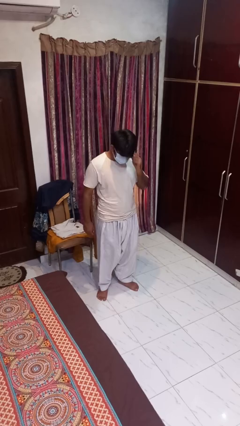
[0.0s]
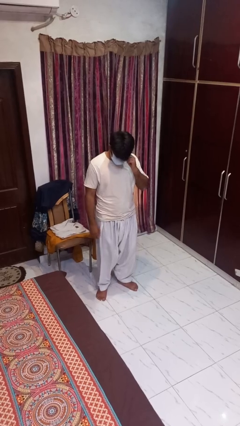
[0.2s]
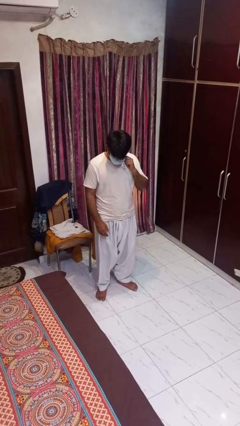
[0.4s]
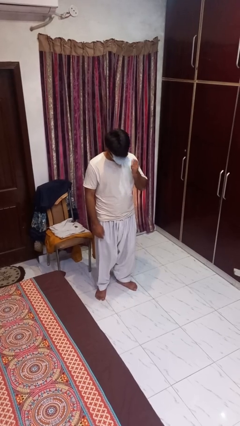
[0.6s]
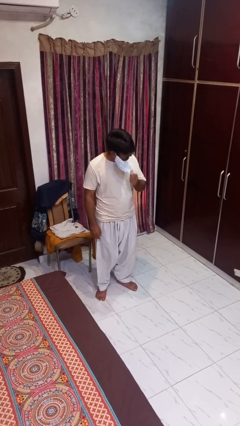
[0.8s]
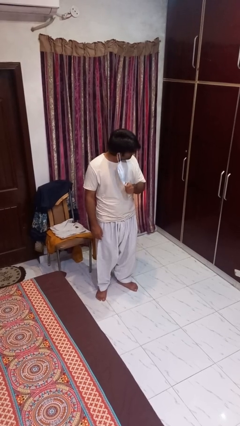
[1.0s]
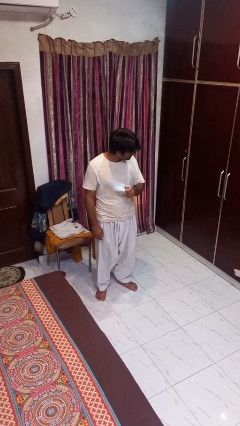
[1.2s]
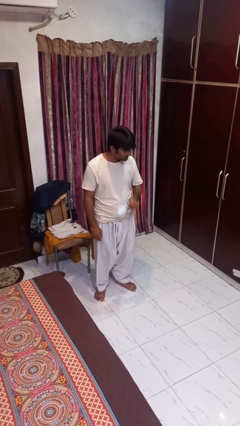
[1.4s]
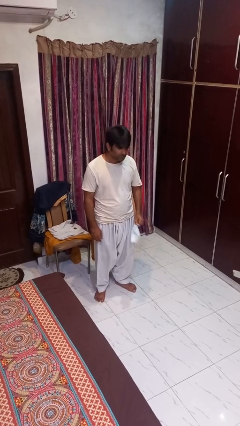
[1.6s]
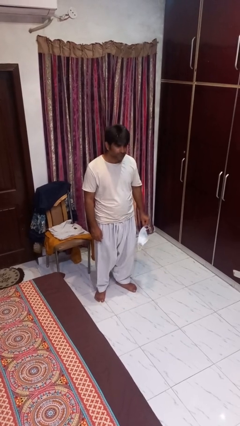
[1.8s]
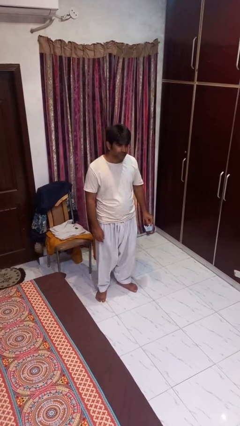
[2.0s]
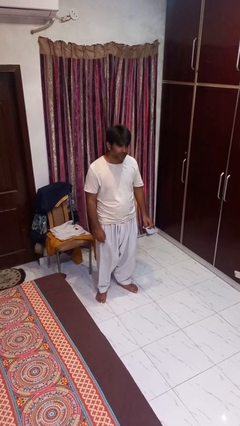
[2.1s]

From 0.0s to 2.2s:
person takes off facemask

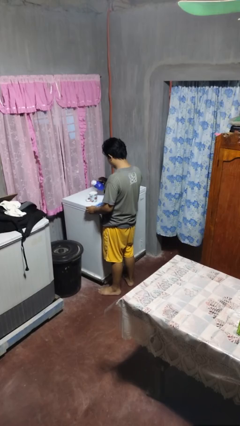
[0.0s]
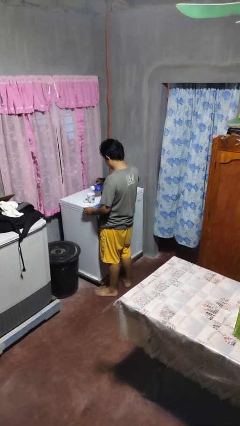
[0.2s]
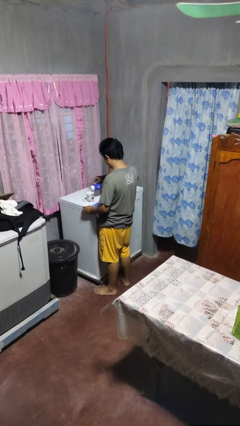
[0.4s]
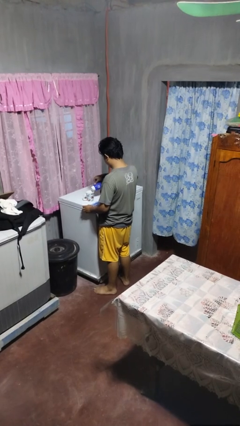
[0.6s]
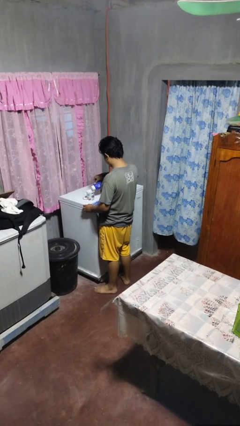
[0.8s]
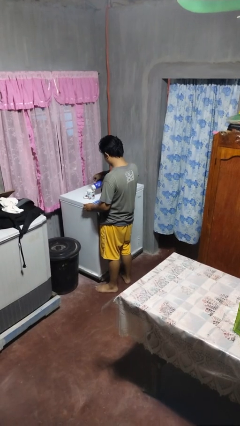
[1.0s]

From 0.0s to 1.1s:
person pours coffee into mug

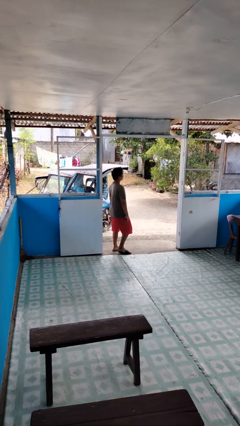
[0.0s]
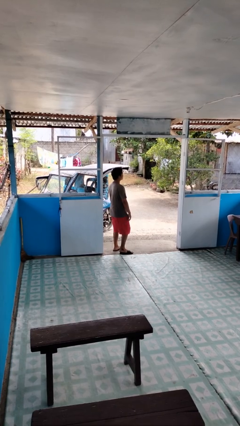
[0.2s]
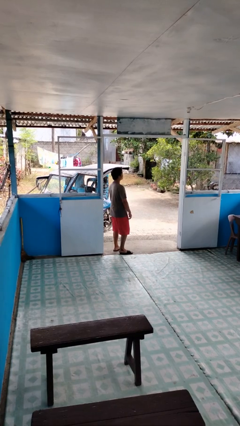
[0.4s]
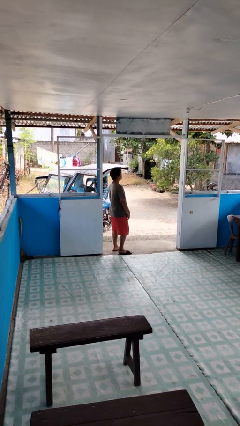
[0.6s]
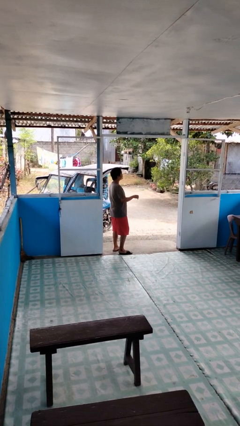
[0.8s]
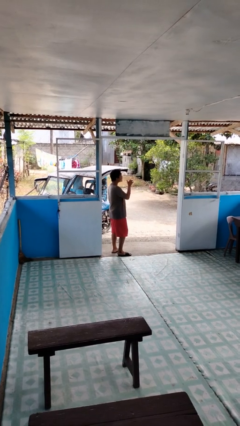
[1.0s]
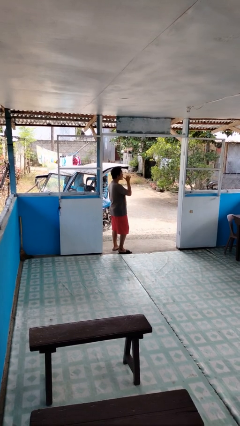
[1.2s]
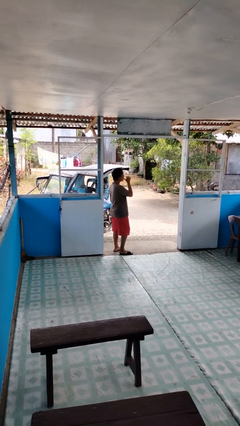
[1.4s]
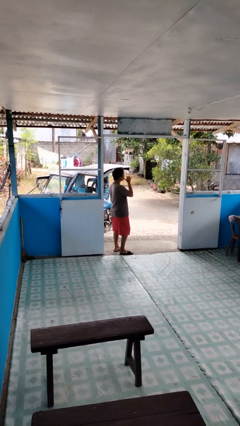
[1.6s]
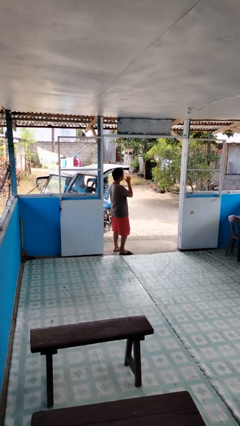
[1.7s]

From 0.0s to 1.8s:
person licks fingers

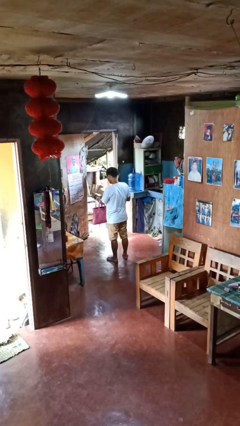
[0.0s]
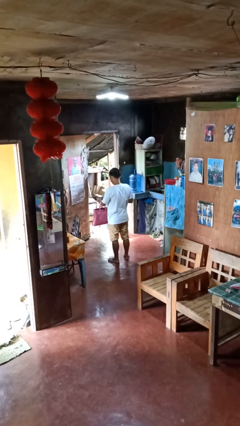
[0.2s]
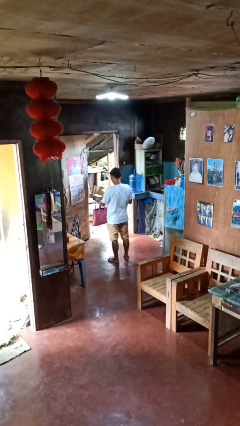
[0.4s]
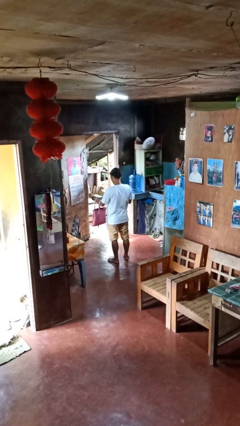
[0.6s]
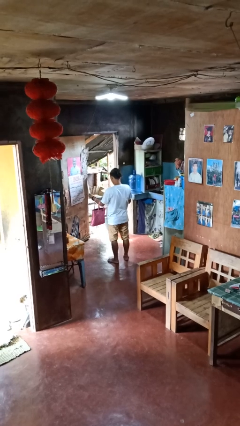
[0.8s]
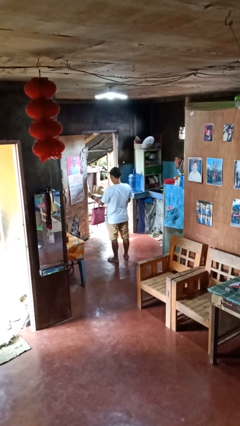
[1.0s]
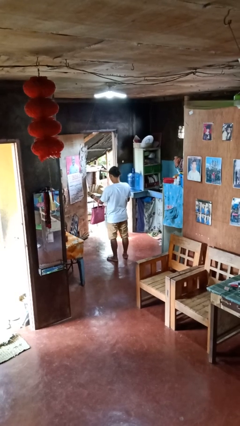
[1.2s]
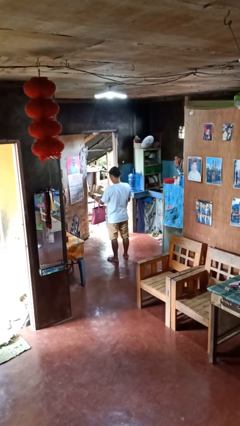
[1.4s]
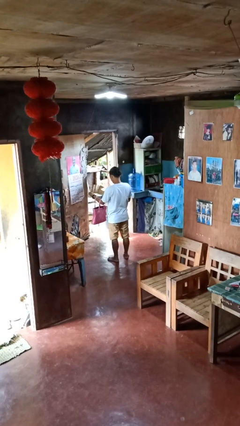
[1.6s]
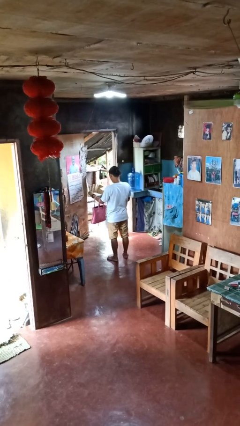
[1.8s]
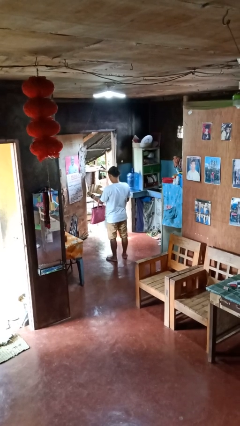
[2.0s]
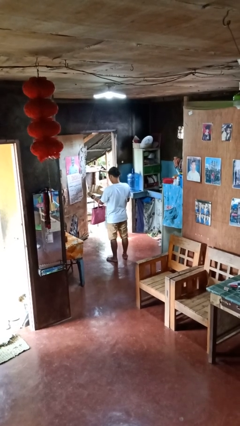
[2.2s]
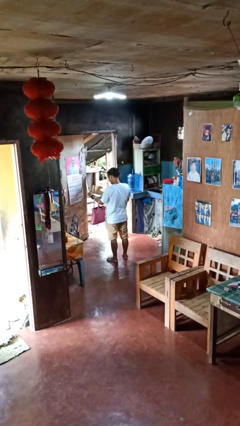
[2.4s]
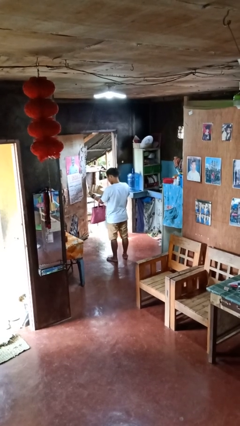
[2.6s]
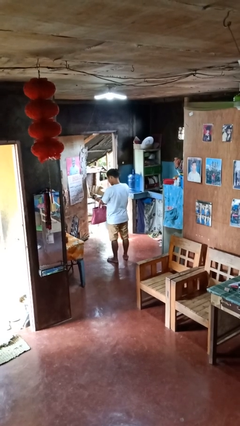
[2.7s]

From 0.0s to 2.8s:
person takes object from purse

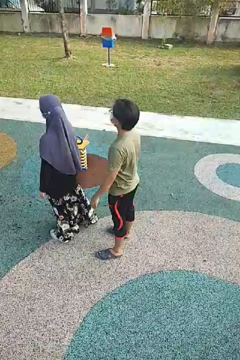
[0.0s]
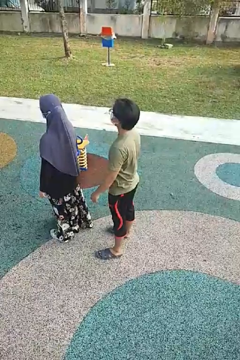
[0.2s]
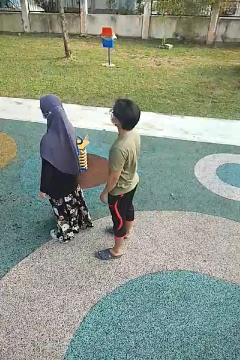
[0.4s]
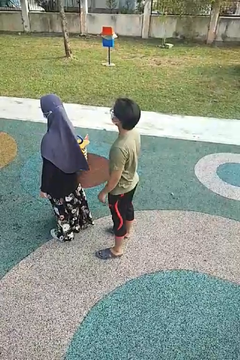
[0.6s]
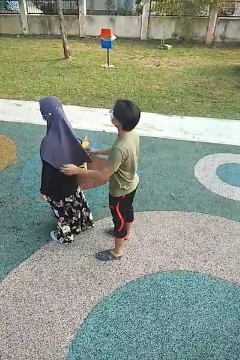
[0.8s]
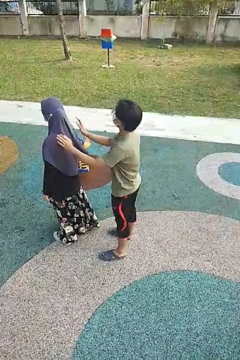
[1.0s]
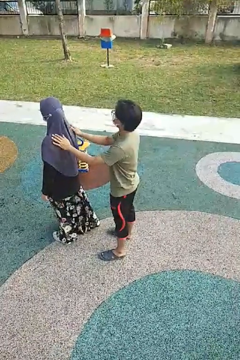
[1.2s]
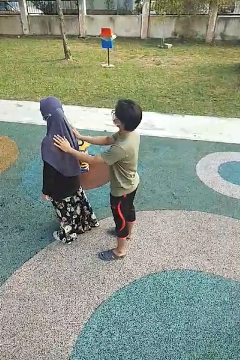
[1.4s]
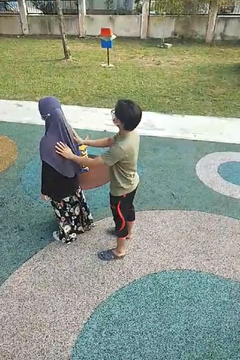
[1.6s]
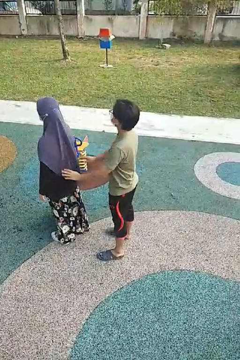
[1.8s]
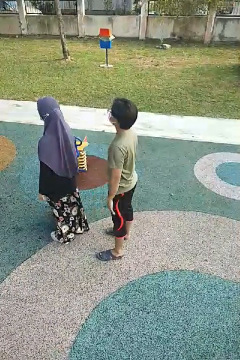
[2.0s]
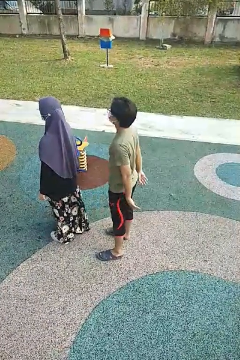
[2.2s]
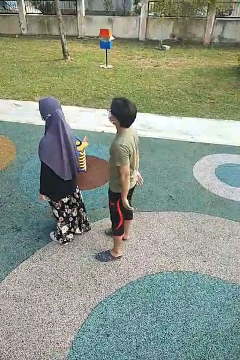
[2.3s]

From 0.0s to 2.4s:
person touches back of person

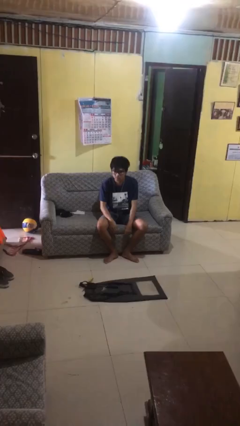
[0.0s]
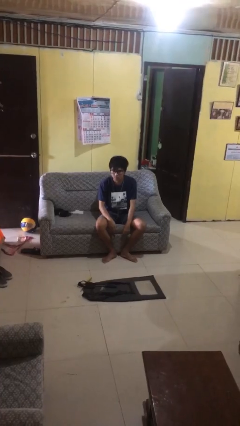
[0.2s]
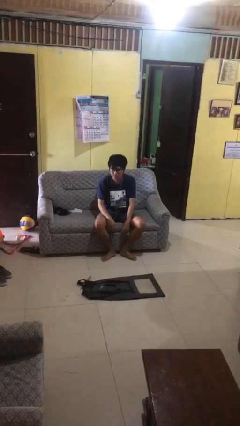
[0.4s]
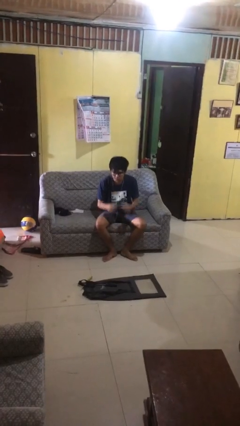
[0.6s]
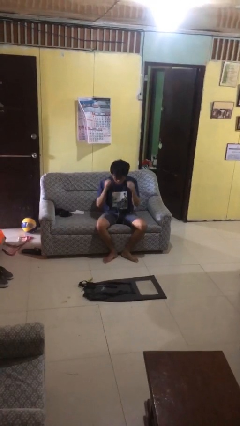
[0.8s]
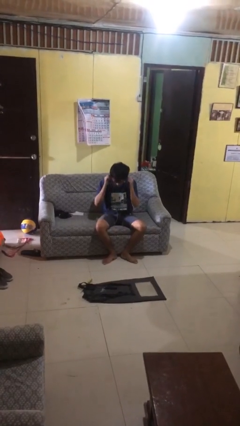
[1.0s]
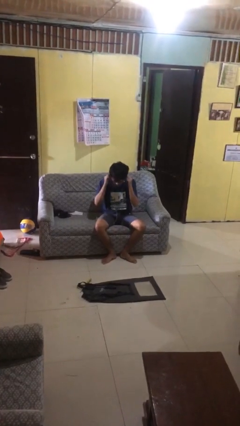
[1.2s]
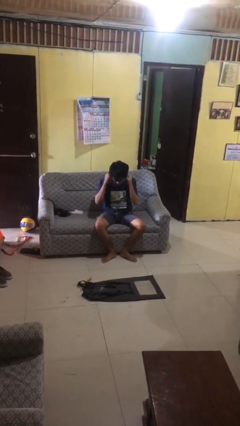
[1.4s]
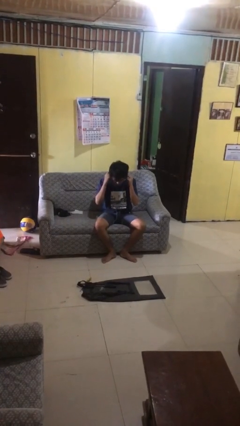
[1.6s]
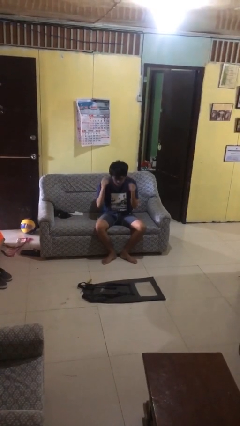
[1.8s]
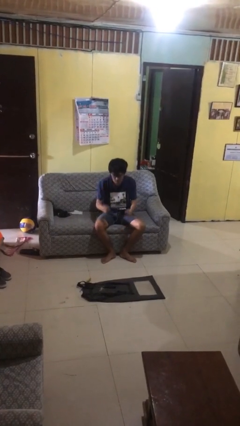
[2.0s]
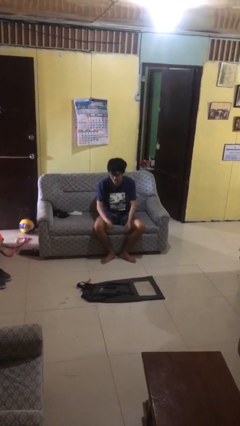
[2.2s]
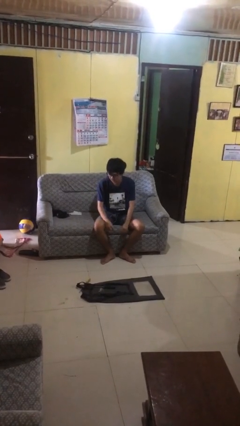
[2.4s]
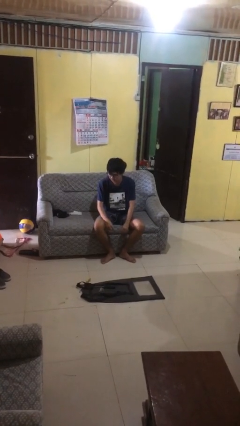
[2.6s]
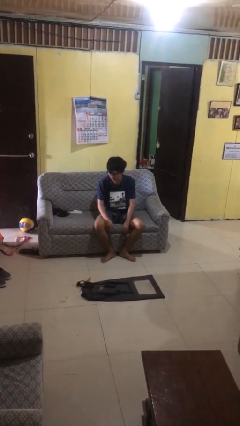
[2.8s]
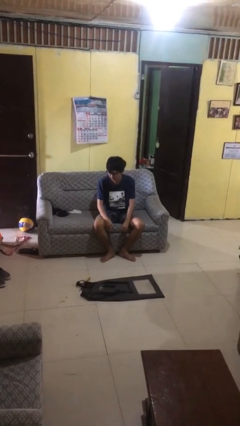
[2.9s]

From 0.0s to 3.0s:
person takes off headphones

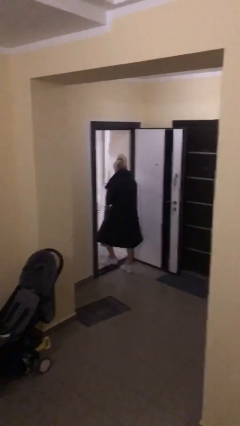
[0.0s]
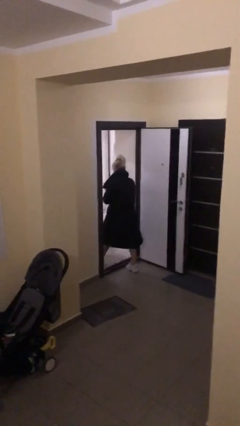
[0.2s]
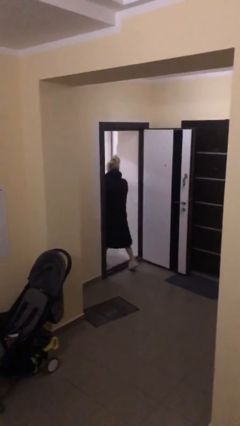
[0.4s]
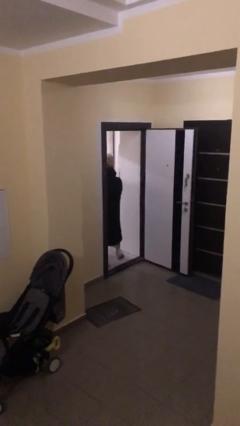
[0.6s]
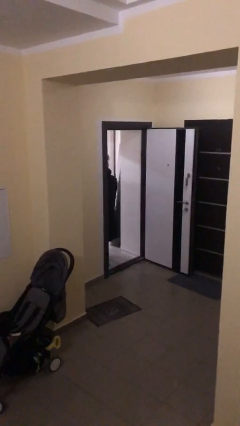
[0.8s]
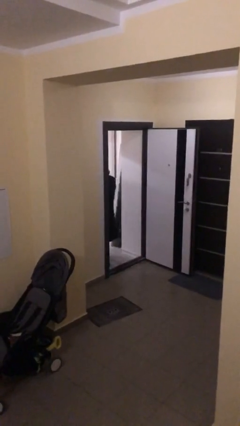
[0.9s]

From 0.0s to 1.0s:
person exits scene through structure

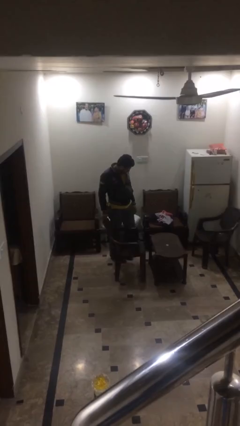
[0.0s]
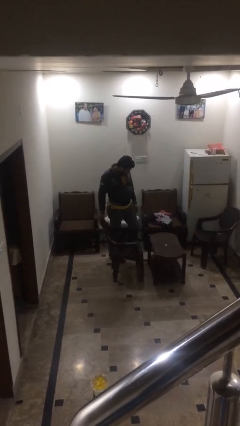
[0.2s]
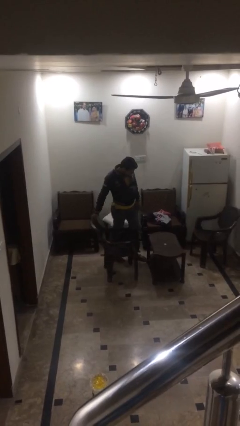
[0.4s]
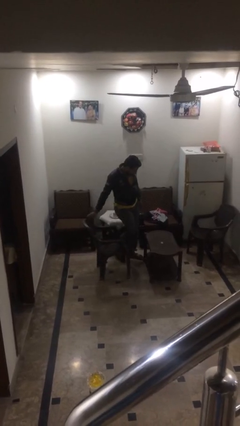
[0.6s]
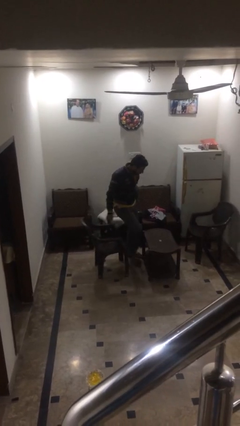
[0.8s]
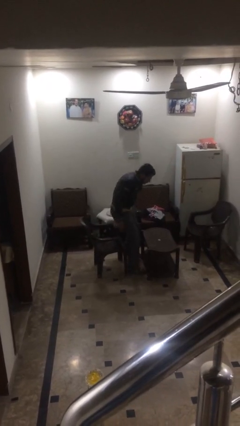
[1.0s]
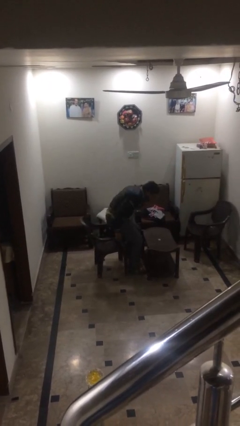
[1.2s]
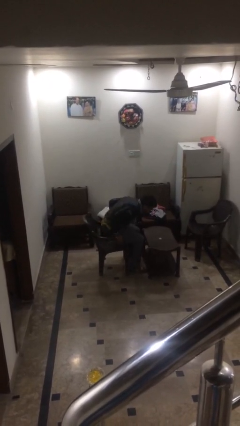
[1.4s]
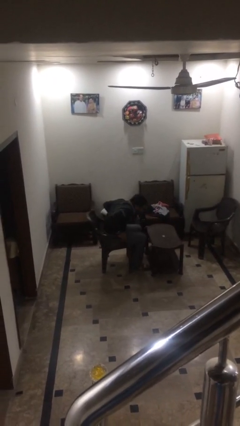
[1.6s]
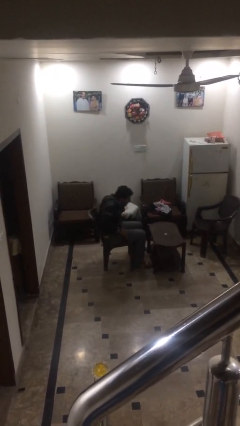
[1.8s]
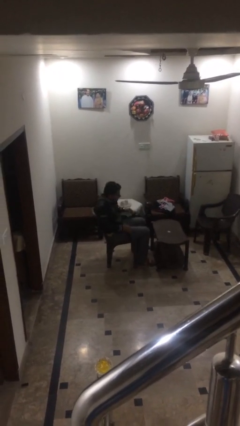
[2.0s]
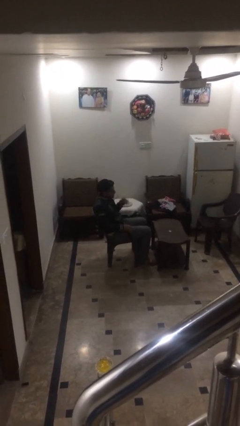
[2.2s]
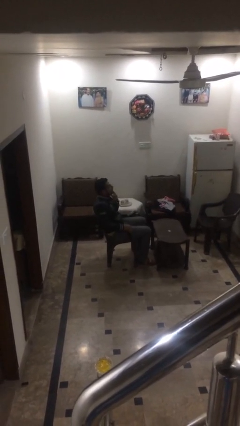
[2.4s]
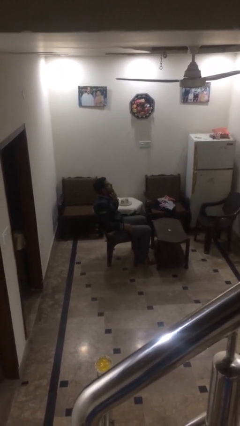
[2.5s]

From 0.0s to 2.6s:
person sits down

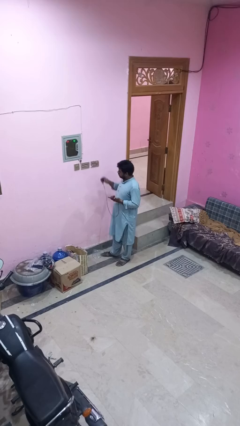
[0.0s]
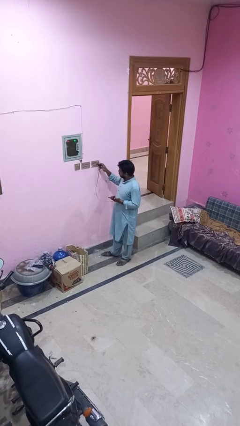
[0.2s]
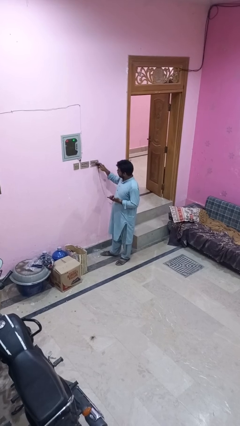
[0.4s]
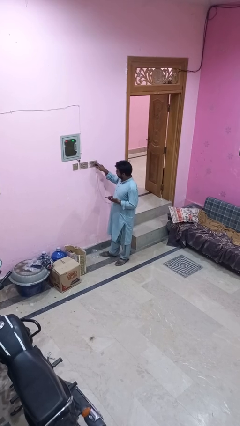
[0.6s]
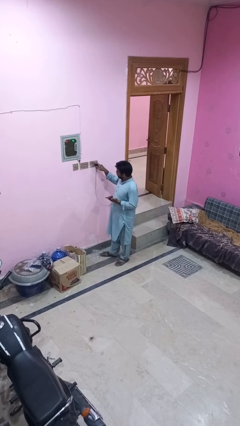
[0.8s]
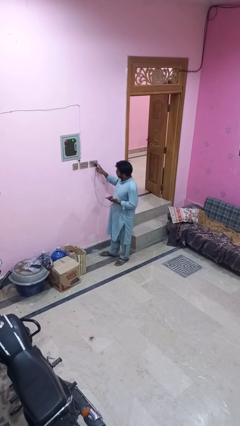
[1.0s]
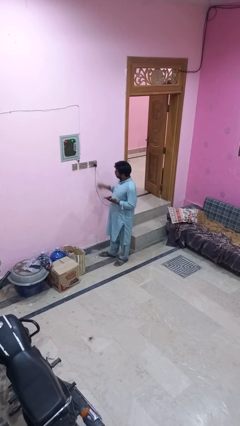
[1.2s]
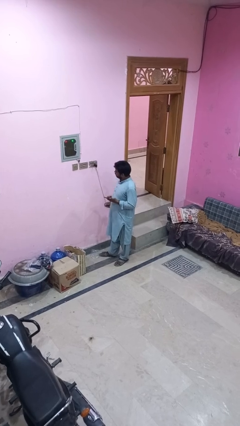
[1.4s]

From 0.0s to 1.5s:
person plugs into electrical socket
